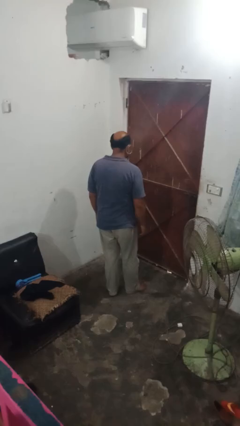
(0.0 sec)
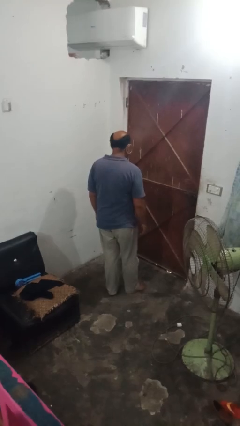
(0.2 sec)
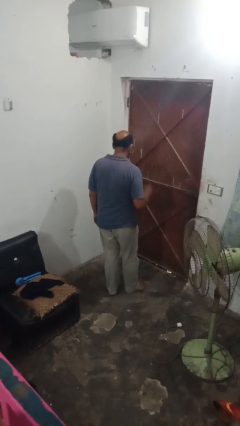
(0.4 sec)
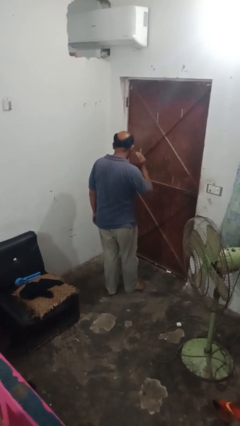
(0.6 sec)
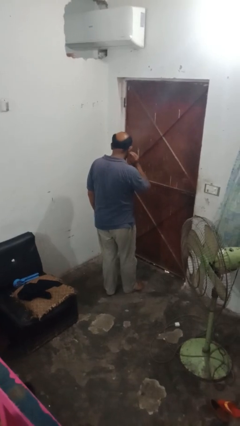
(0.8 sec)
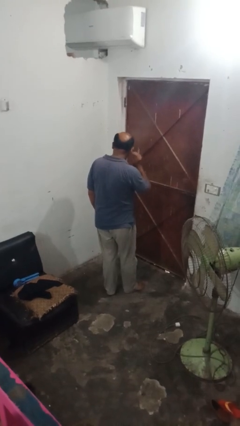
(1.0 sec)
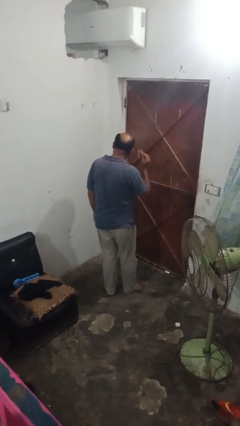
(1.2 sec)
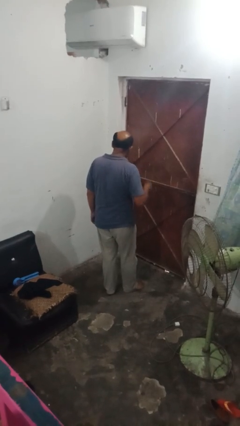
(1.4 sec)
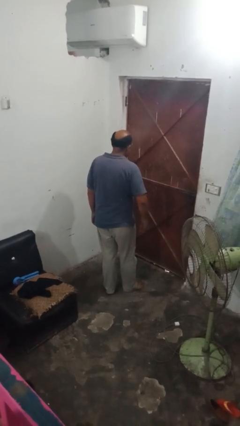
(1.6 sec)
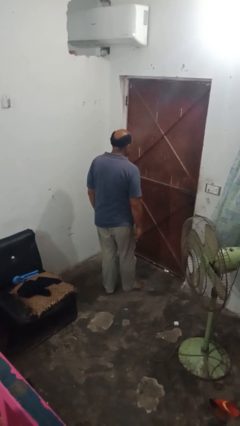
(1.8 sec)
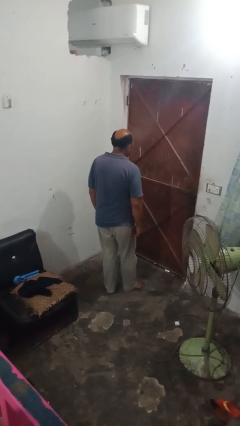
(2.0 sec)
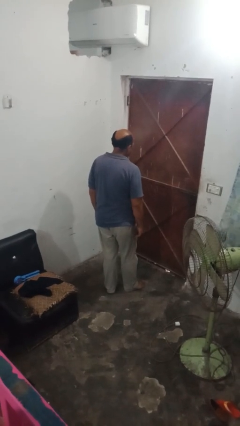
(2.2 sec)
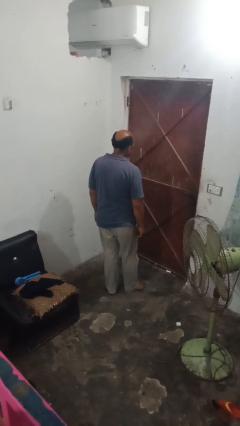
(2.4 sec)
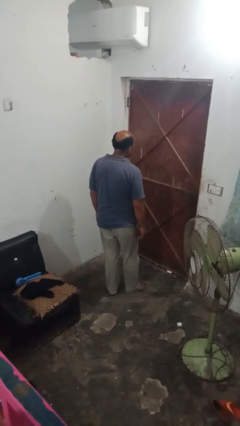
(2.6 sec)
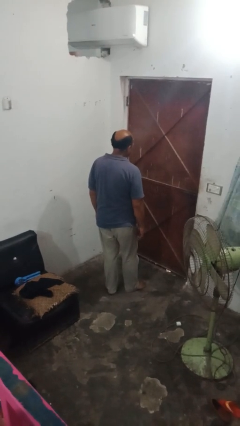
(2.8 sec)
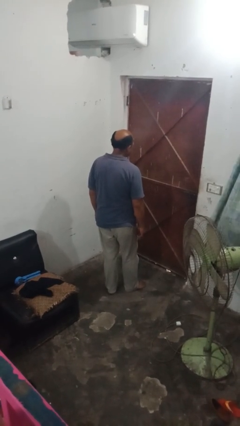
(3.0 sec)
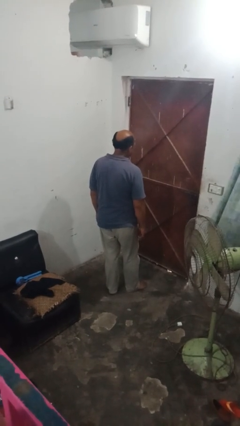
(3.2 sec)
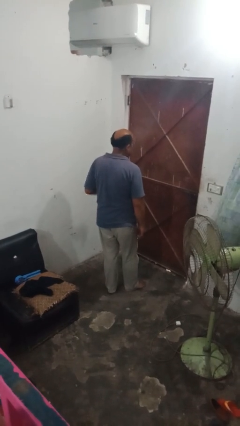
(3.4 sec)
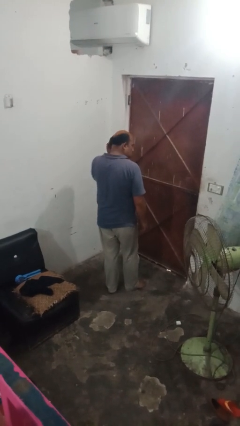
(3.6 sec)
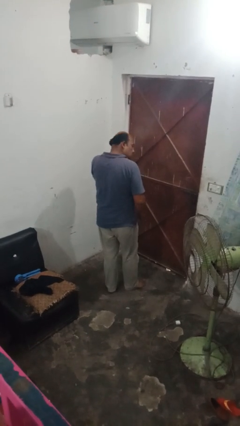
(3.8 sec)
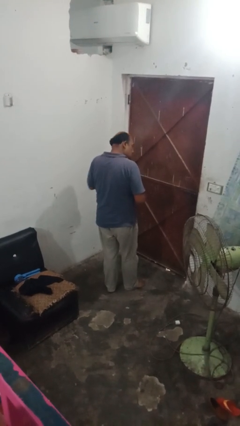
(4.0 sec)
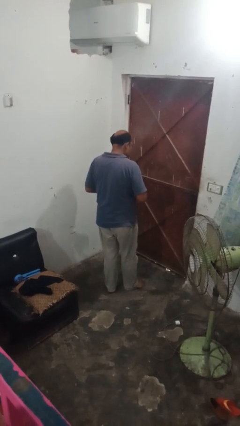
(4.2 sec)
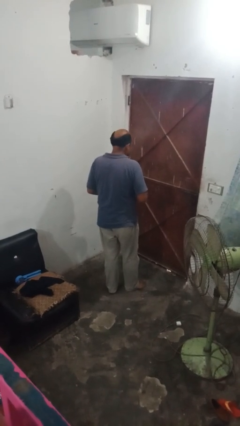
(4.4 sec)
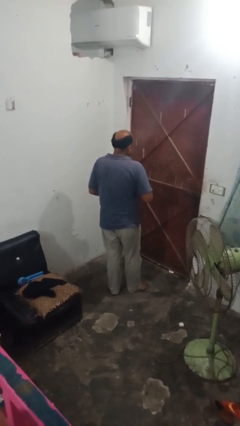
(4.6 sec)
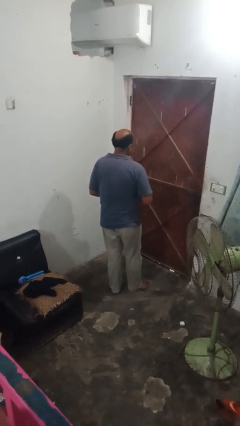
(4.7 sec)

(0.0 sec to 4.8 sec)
person takes off earrings

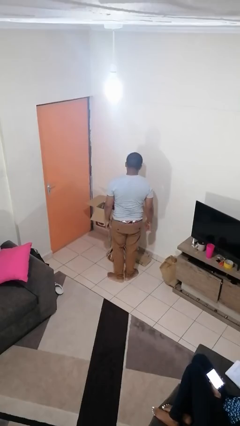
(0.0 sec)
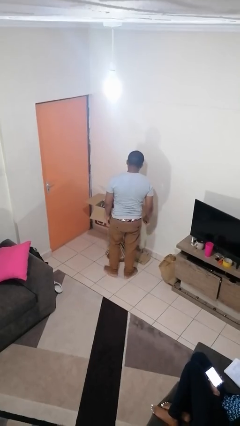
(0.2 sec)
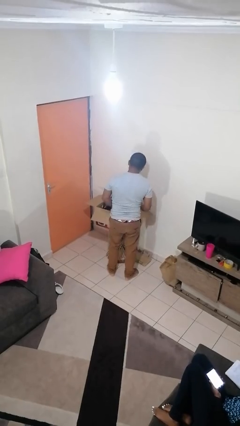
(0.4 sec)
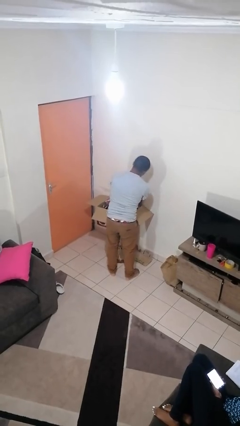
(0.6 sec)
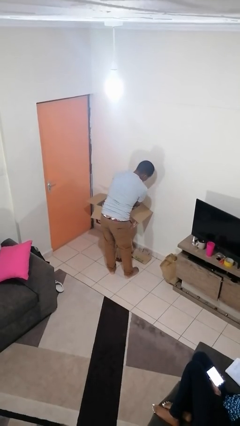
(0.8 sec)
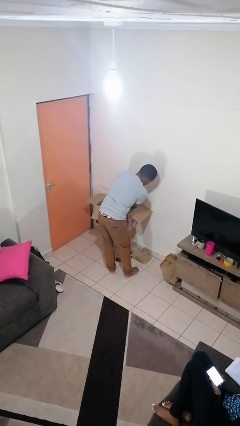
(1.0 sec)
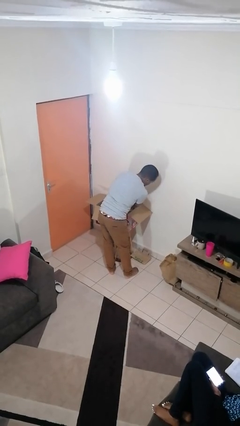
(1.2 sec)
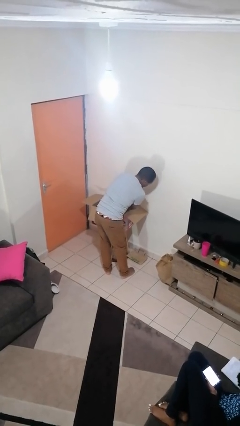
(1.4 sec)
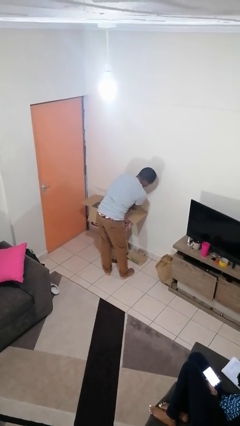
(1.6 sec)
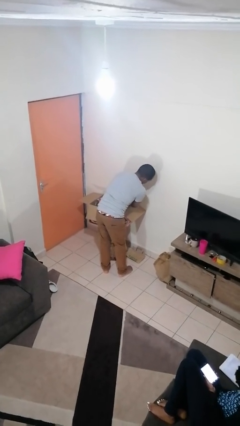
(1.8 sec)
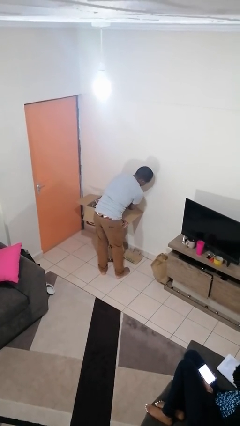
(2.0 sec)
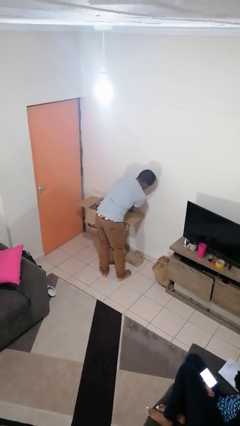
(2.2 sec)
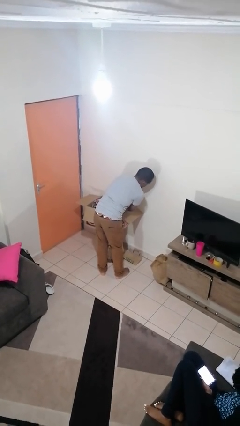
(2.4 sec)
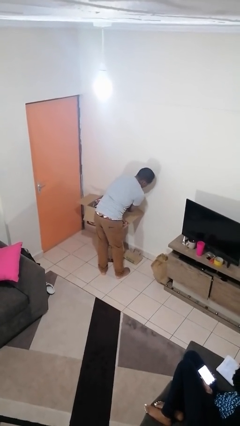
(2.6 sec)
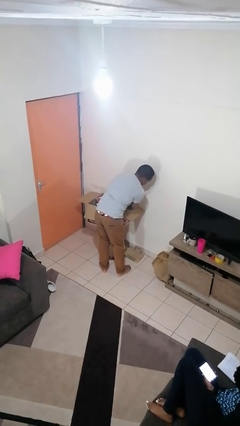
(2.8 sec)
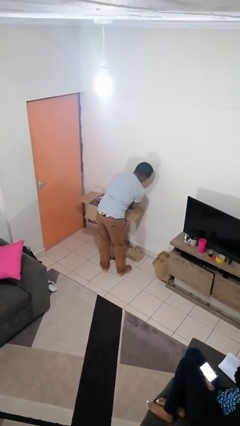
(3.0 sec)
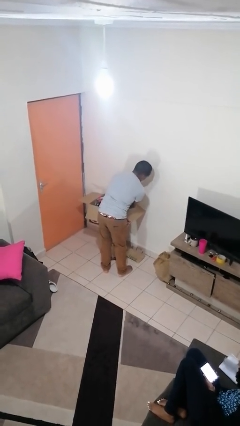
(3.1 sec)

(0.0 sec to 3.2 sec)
person searches in box

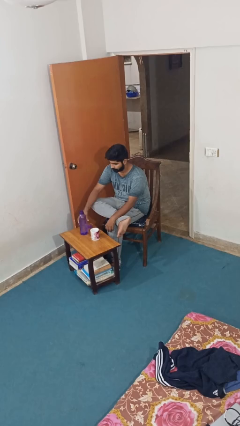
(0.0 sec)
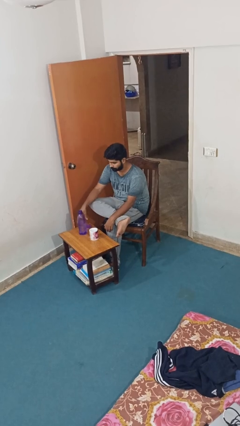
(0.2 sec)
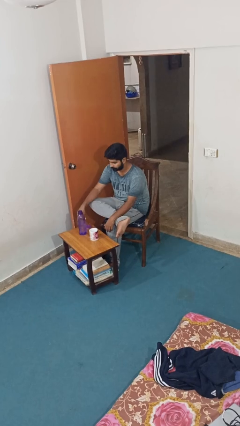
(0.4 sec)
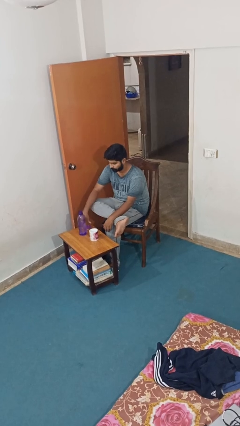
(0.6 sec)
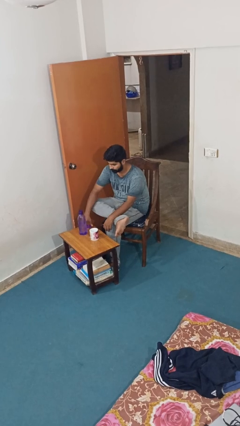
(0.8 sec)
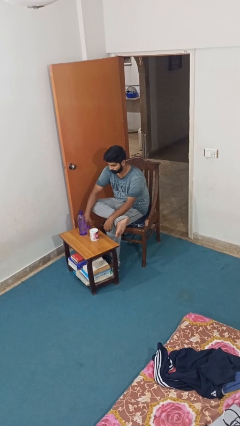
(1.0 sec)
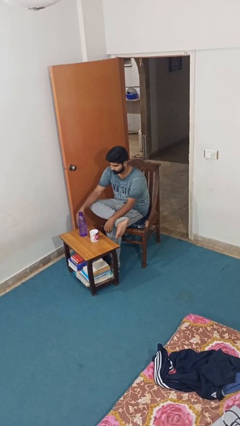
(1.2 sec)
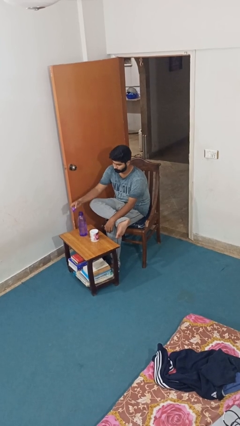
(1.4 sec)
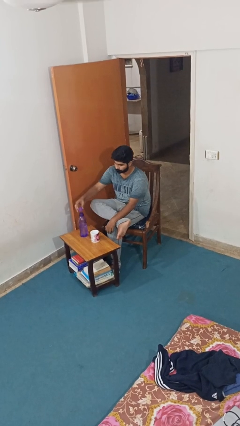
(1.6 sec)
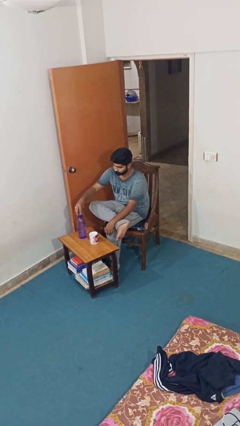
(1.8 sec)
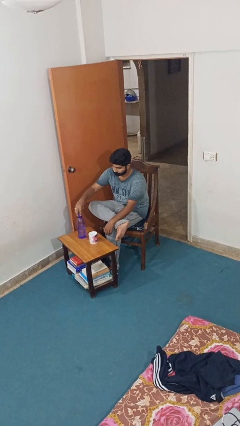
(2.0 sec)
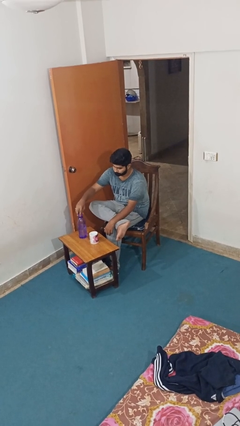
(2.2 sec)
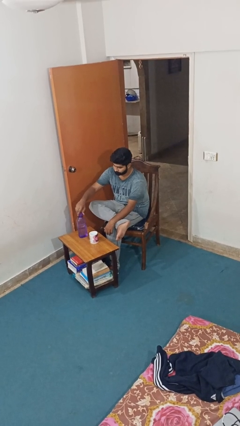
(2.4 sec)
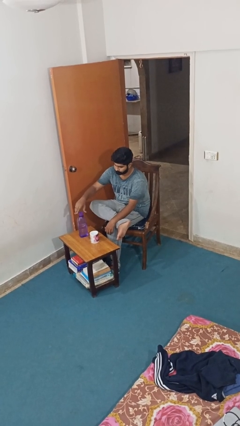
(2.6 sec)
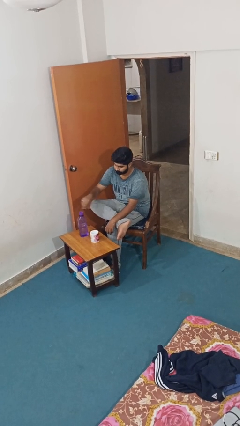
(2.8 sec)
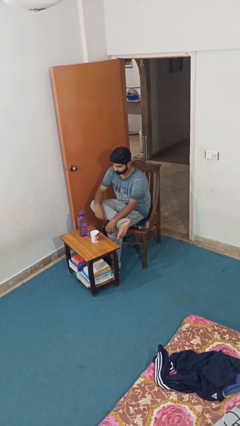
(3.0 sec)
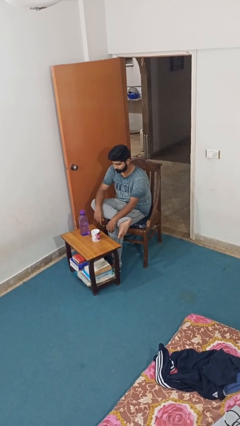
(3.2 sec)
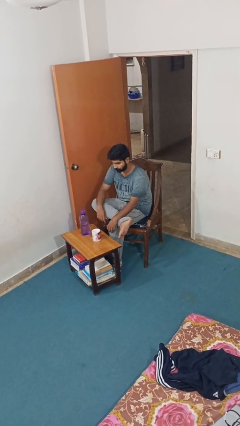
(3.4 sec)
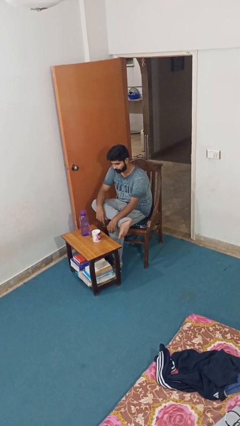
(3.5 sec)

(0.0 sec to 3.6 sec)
person screws lid to bottle

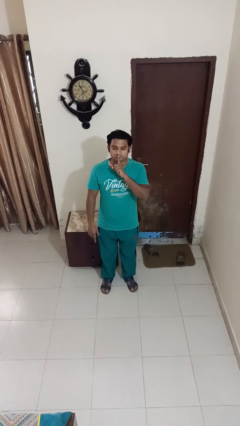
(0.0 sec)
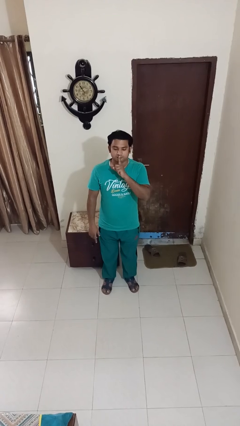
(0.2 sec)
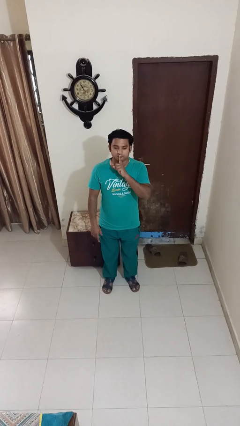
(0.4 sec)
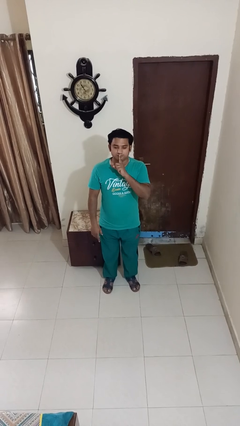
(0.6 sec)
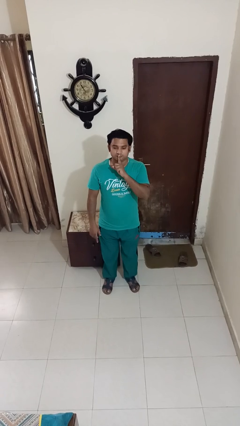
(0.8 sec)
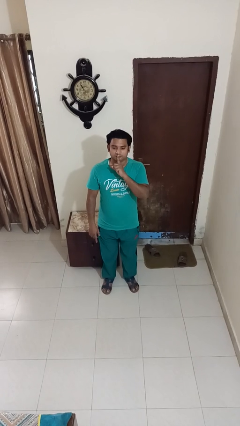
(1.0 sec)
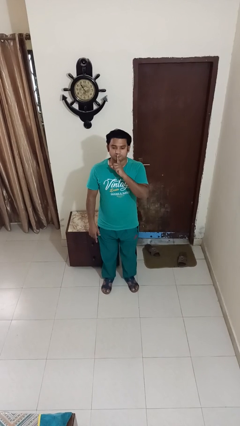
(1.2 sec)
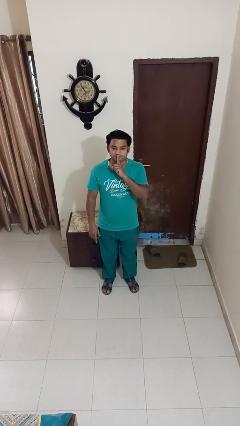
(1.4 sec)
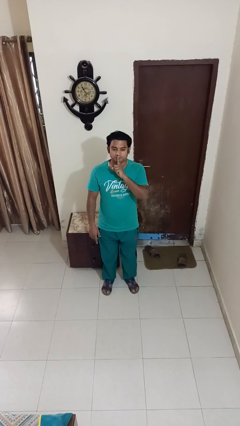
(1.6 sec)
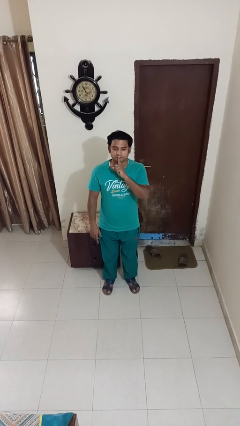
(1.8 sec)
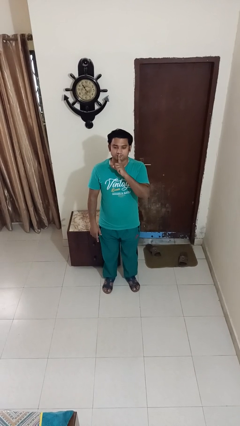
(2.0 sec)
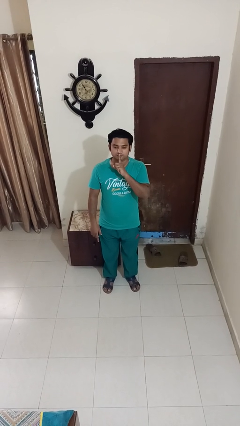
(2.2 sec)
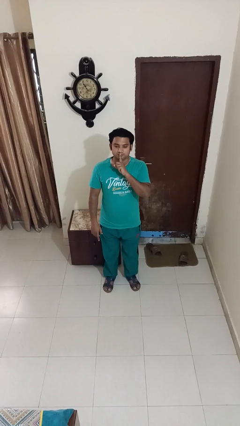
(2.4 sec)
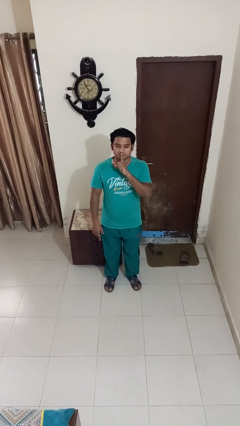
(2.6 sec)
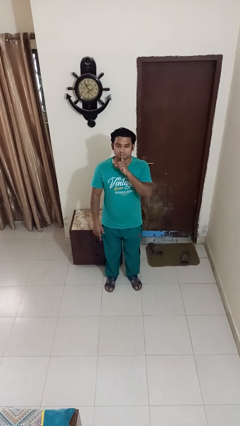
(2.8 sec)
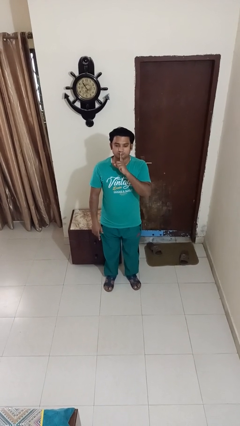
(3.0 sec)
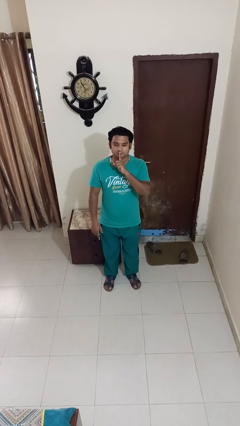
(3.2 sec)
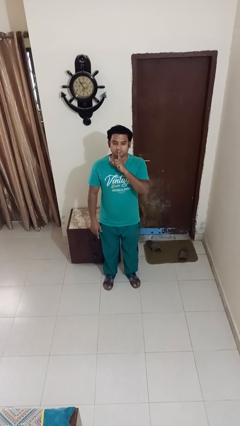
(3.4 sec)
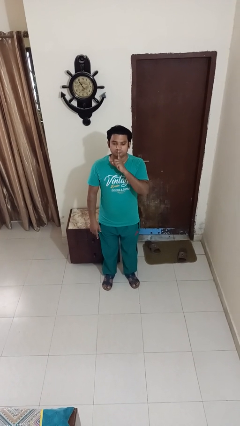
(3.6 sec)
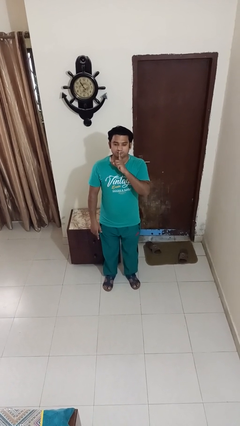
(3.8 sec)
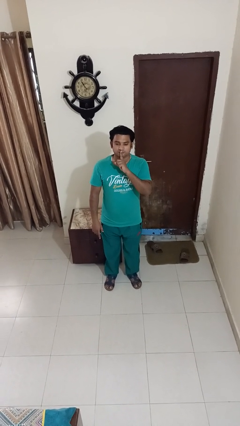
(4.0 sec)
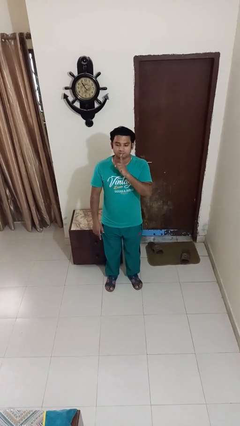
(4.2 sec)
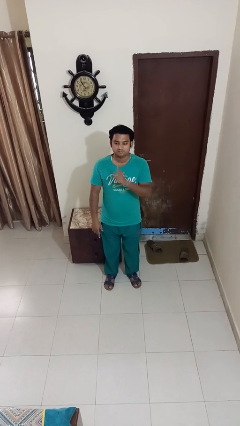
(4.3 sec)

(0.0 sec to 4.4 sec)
person gestures be quiet

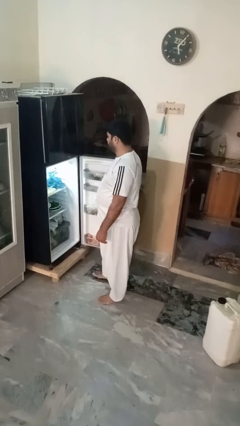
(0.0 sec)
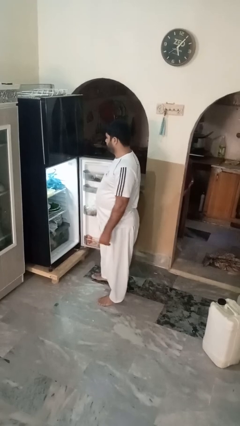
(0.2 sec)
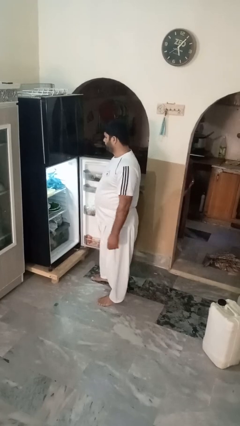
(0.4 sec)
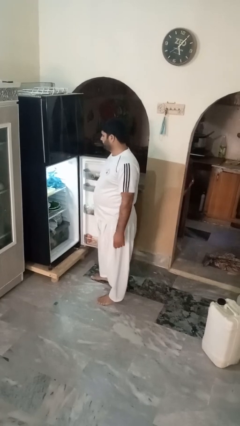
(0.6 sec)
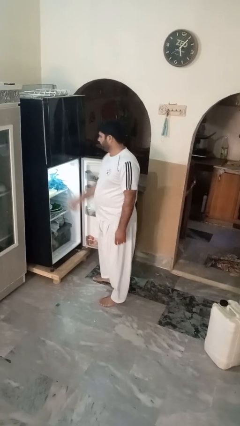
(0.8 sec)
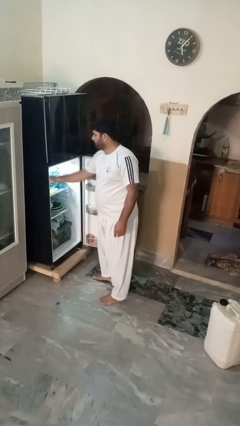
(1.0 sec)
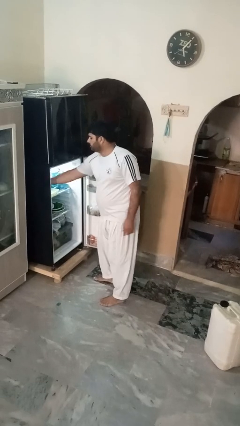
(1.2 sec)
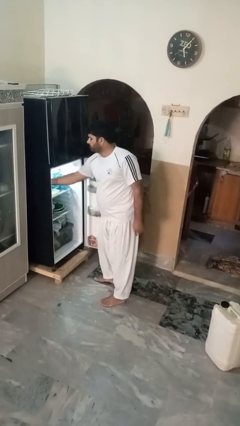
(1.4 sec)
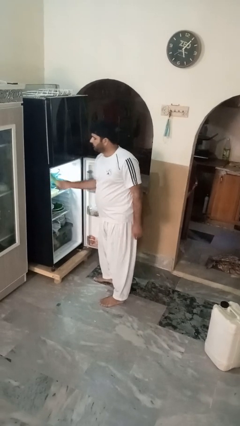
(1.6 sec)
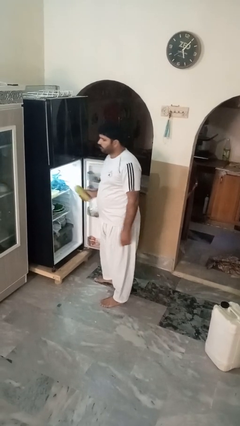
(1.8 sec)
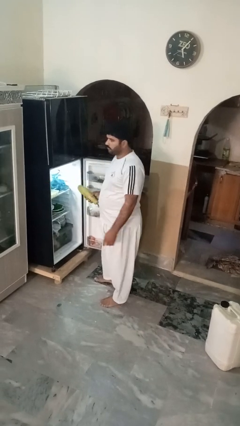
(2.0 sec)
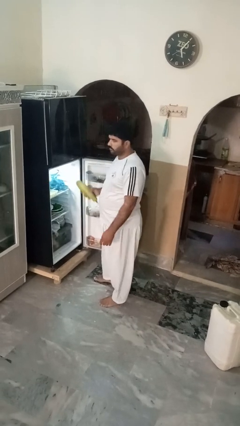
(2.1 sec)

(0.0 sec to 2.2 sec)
person takes object from refrigerator
